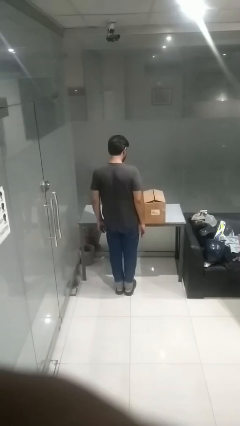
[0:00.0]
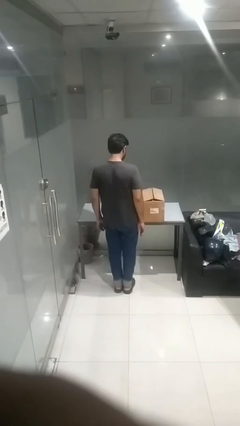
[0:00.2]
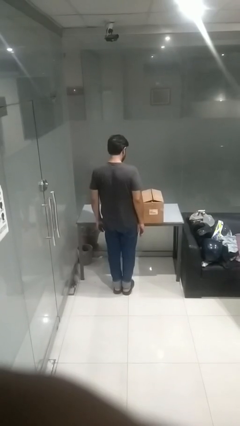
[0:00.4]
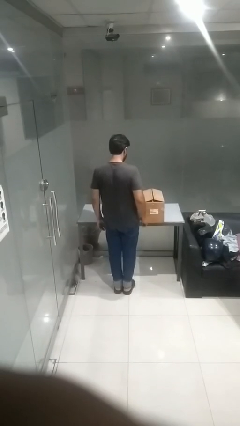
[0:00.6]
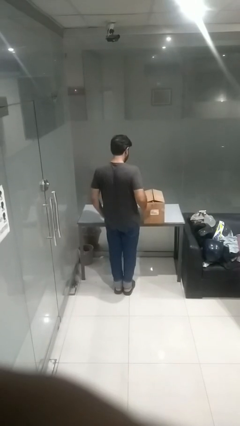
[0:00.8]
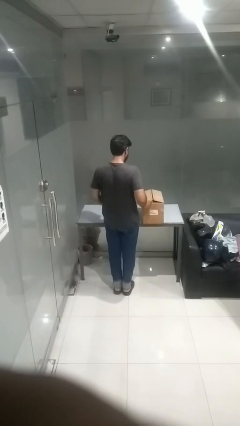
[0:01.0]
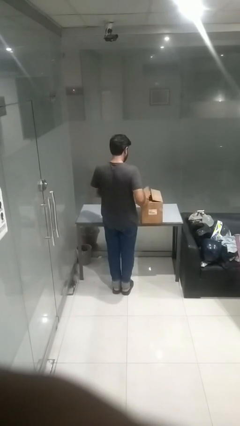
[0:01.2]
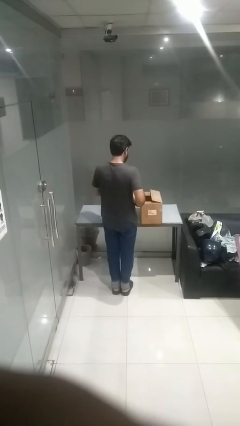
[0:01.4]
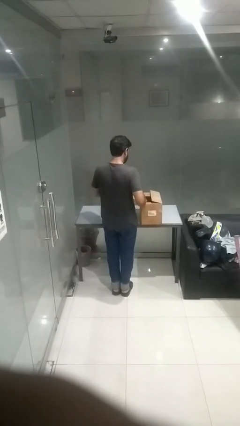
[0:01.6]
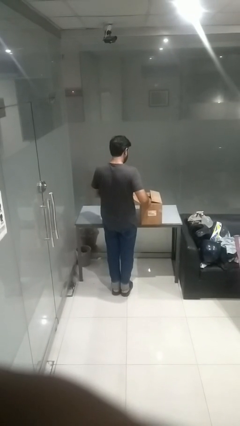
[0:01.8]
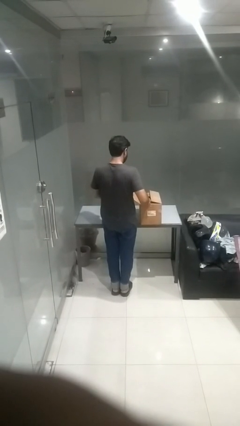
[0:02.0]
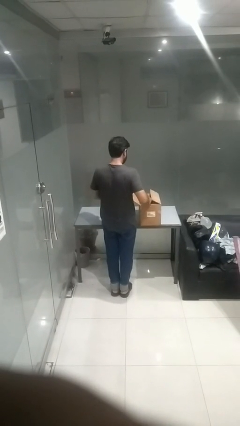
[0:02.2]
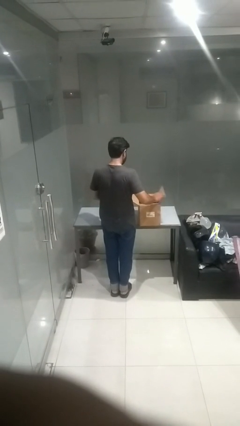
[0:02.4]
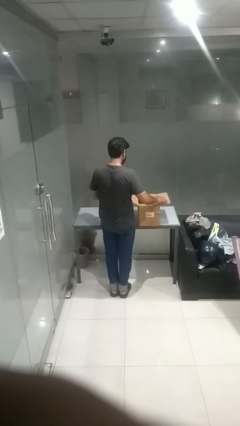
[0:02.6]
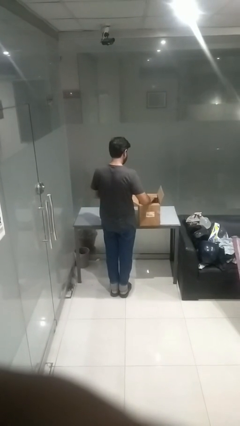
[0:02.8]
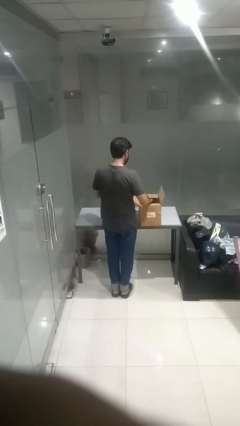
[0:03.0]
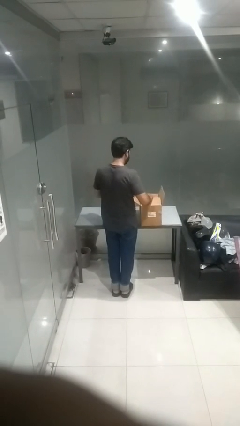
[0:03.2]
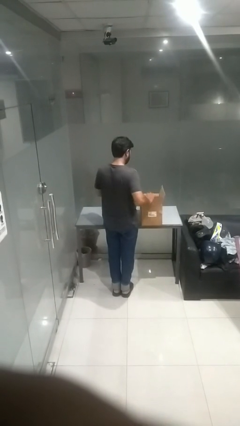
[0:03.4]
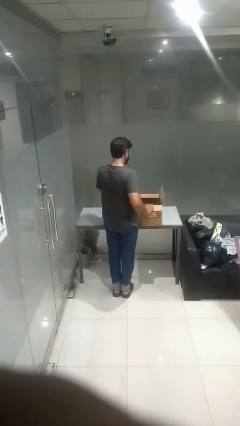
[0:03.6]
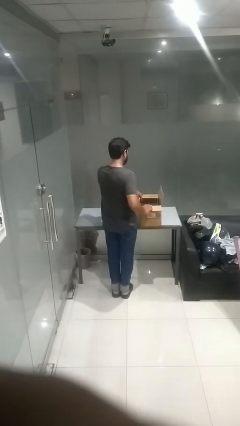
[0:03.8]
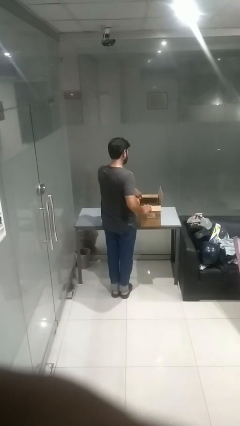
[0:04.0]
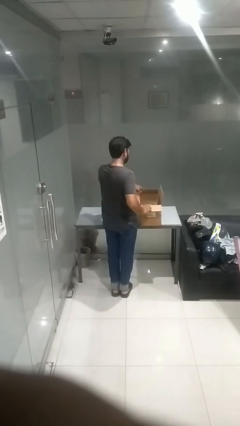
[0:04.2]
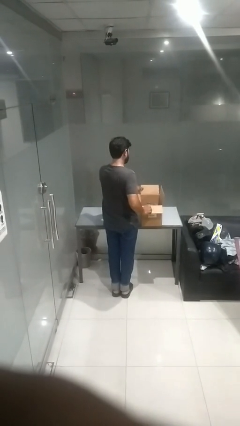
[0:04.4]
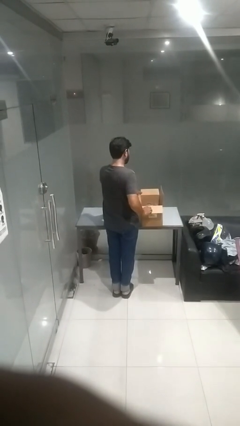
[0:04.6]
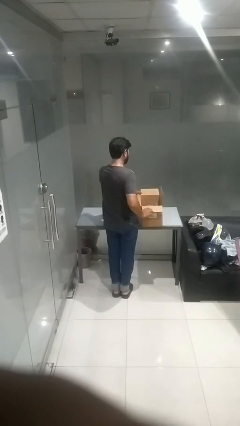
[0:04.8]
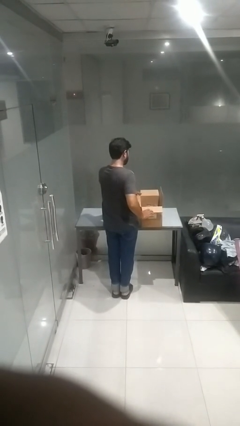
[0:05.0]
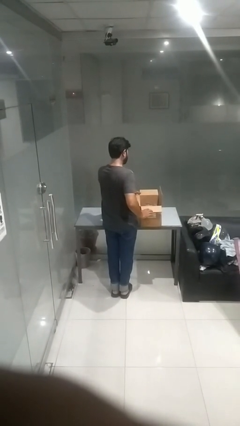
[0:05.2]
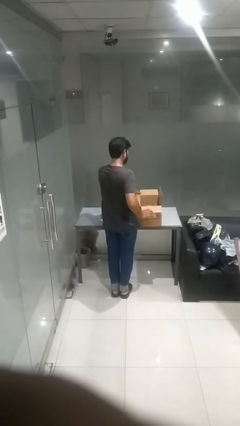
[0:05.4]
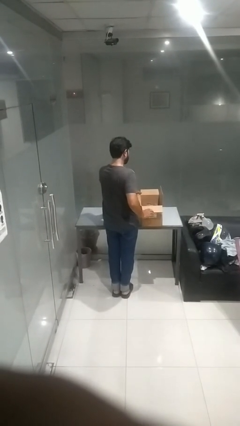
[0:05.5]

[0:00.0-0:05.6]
person opens box

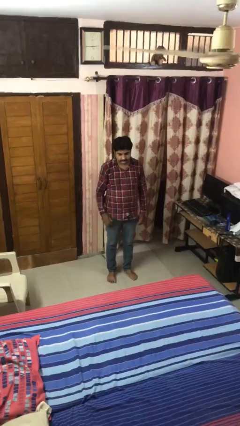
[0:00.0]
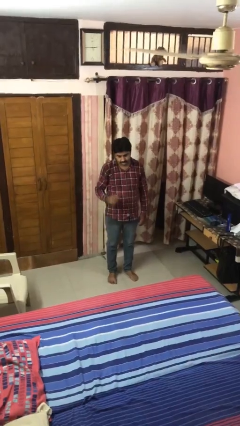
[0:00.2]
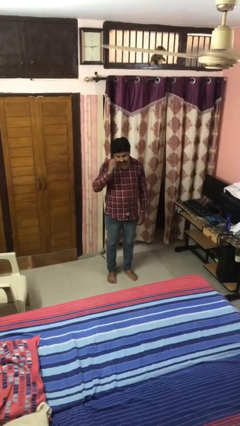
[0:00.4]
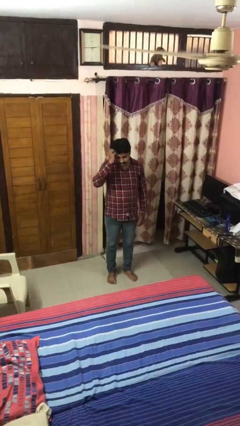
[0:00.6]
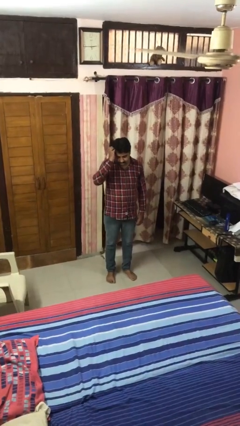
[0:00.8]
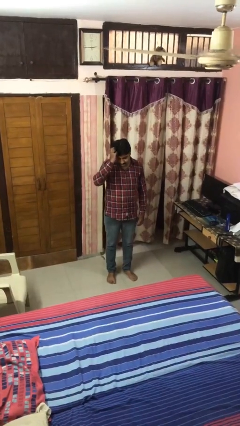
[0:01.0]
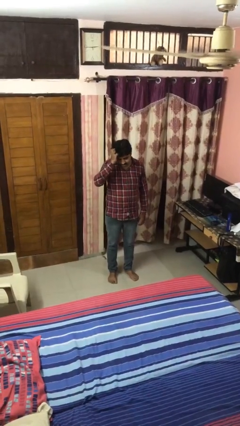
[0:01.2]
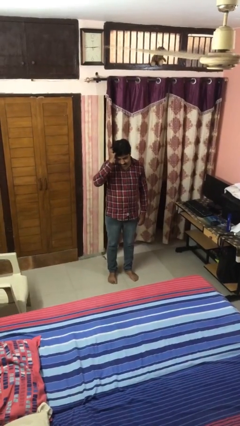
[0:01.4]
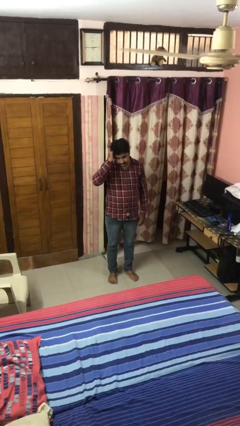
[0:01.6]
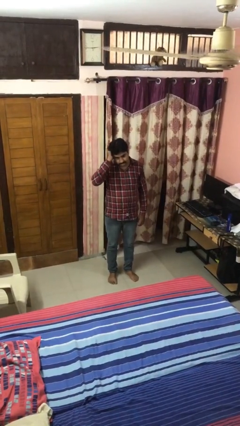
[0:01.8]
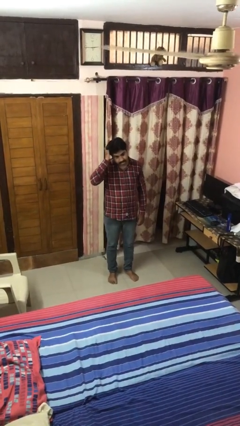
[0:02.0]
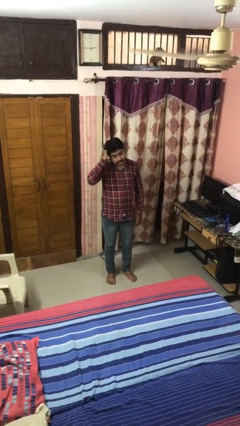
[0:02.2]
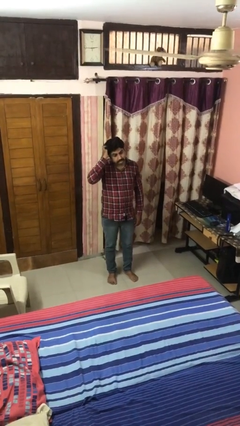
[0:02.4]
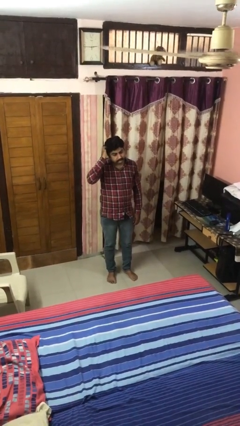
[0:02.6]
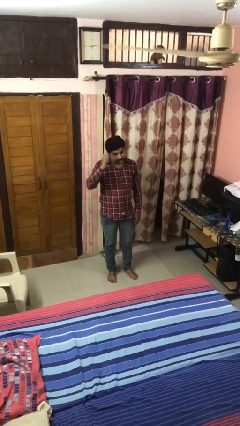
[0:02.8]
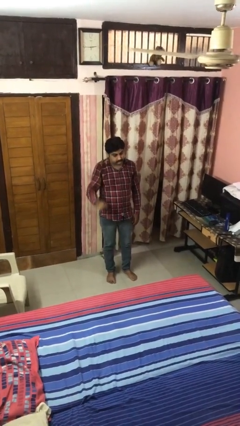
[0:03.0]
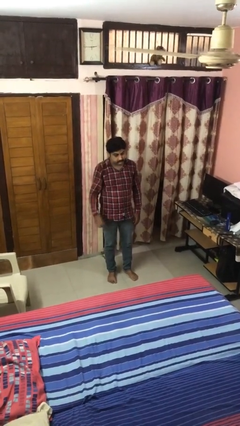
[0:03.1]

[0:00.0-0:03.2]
person scratches face

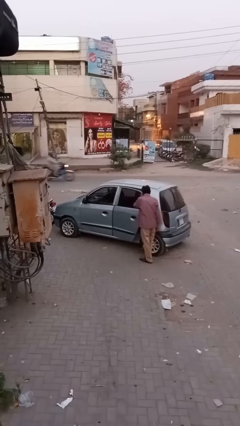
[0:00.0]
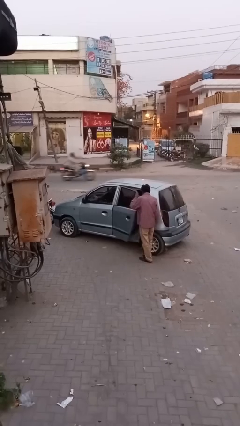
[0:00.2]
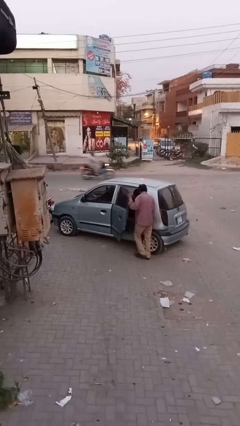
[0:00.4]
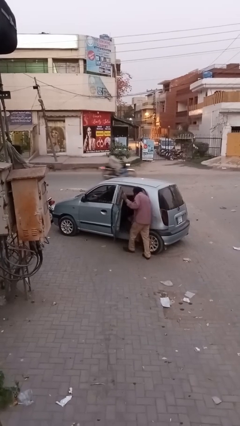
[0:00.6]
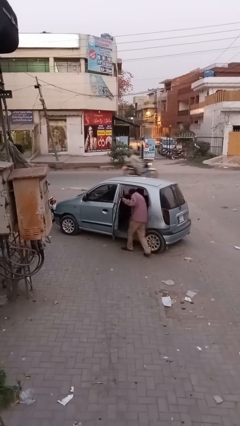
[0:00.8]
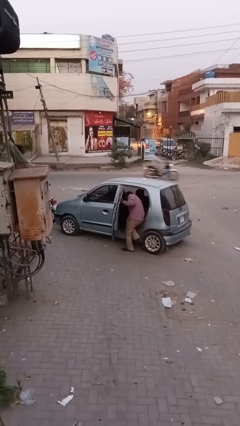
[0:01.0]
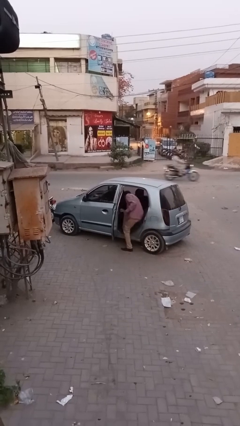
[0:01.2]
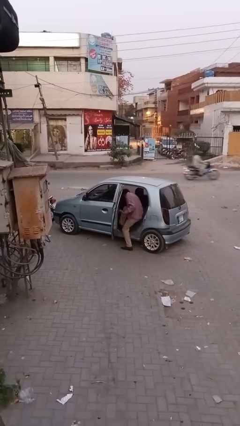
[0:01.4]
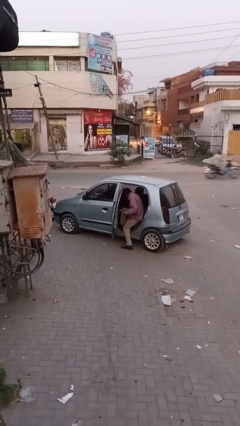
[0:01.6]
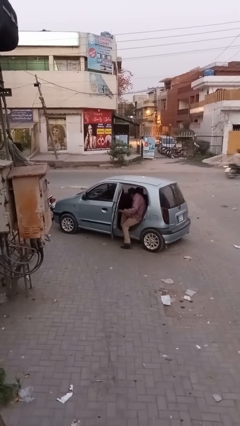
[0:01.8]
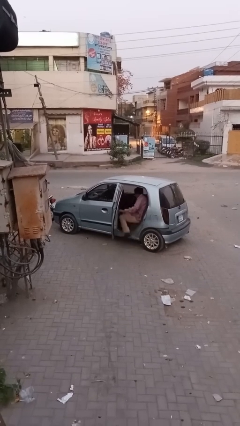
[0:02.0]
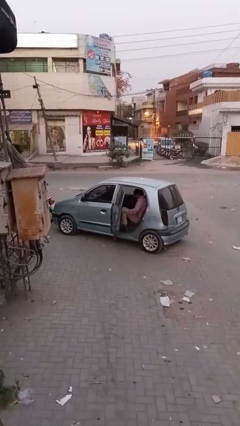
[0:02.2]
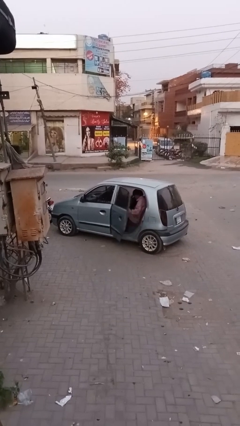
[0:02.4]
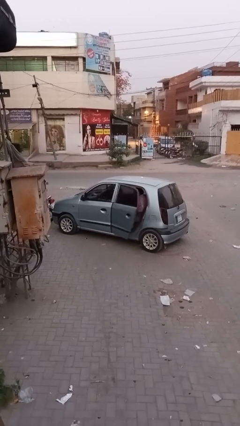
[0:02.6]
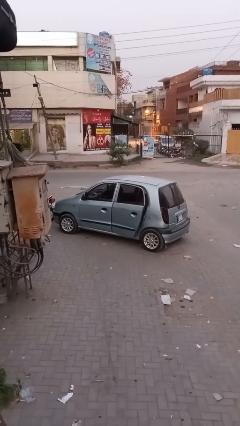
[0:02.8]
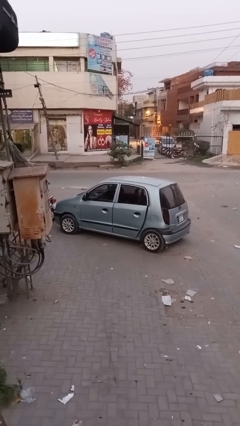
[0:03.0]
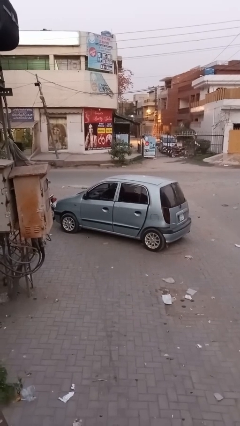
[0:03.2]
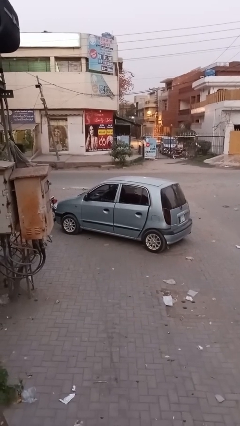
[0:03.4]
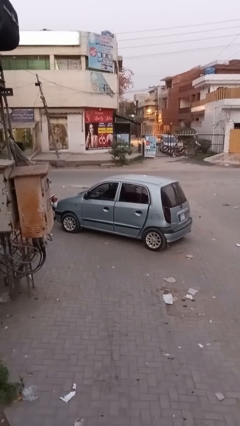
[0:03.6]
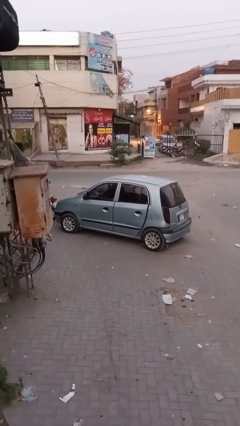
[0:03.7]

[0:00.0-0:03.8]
car picks up person

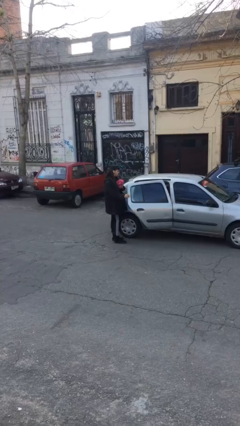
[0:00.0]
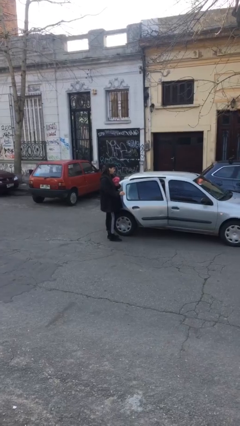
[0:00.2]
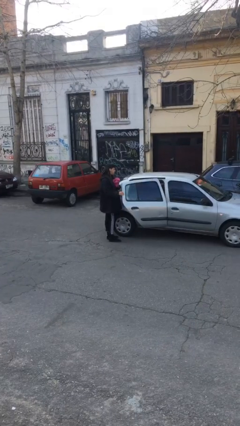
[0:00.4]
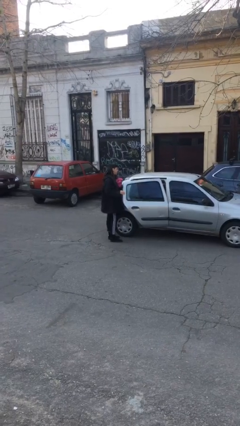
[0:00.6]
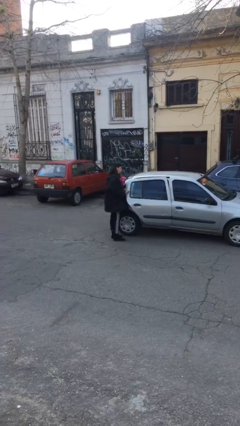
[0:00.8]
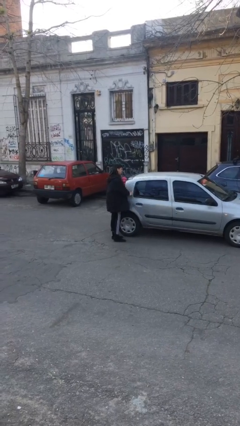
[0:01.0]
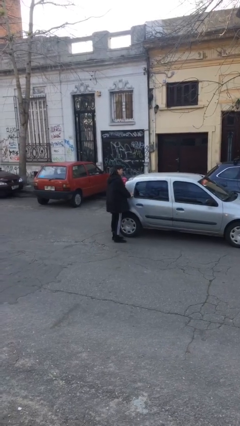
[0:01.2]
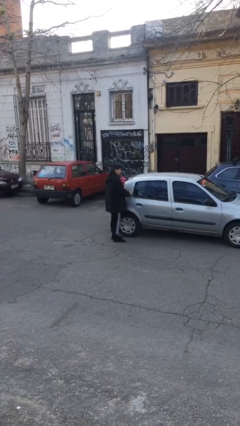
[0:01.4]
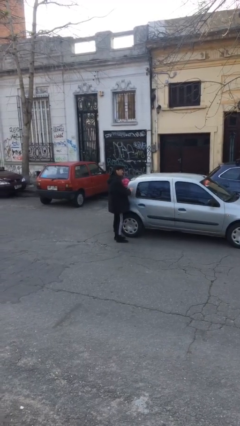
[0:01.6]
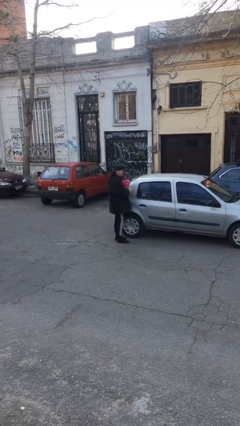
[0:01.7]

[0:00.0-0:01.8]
person closes car door

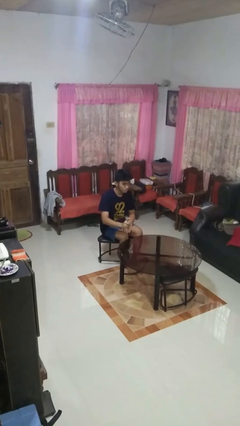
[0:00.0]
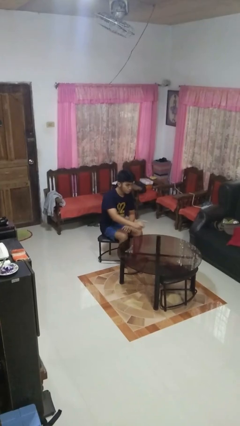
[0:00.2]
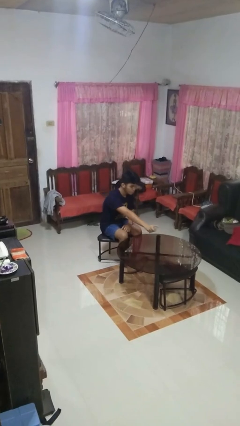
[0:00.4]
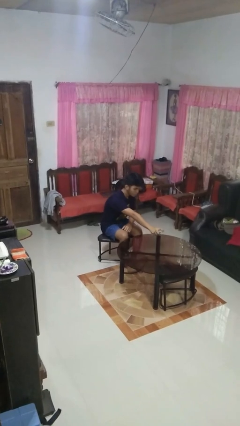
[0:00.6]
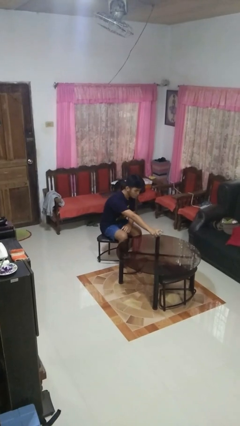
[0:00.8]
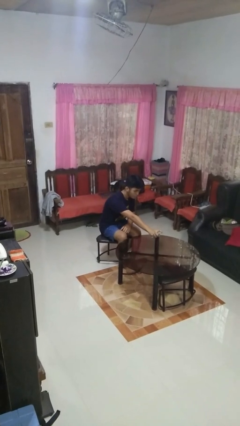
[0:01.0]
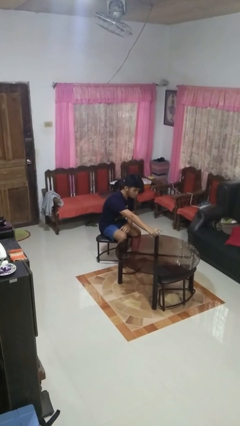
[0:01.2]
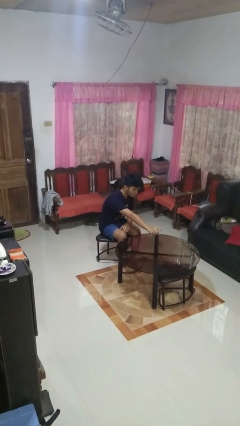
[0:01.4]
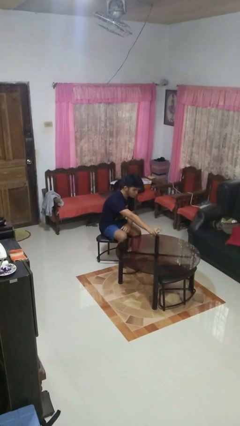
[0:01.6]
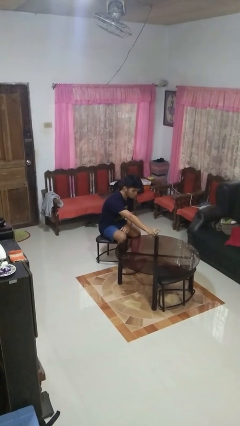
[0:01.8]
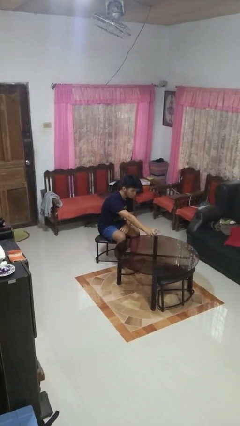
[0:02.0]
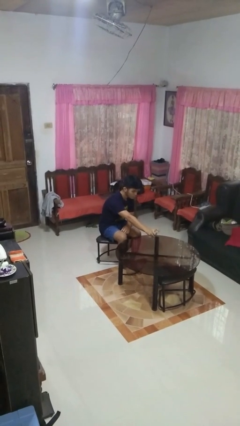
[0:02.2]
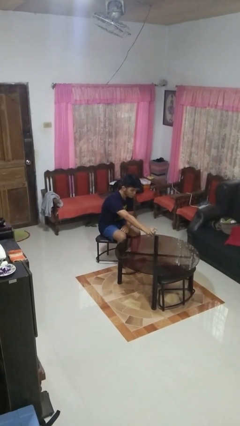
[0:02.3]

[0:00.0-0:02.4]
person sprays from bottle

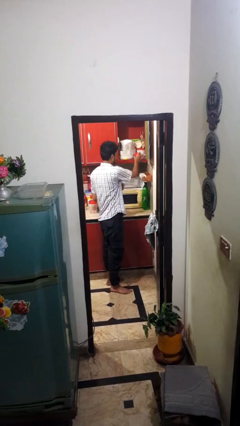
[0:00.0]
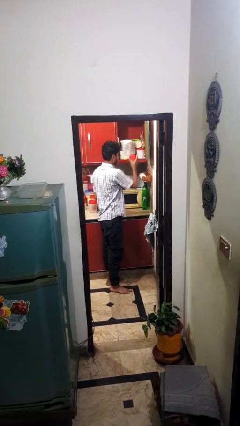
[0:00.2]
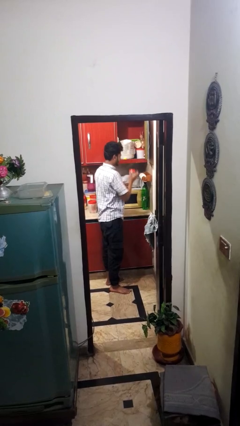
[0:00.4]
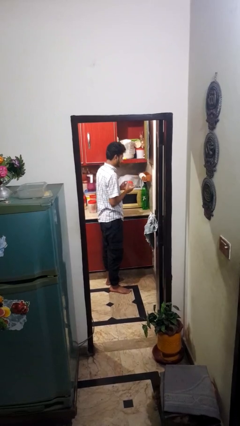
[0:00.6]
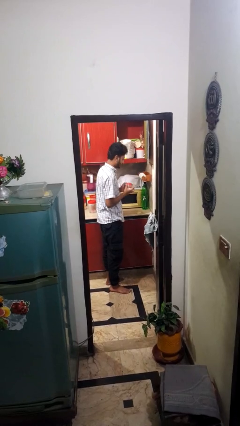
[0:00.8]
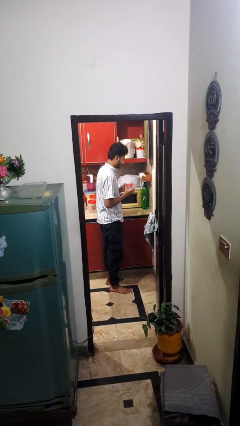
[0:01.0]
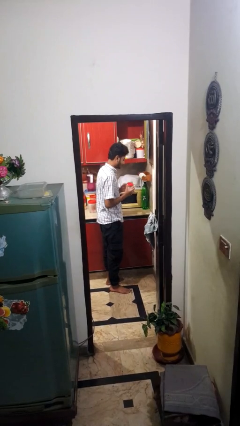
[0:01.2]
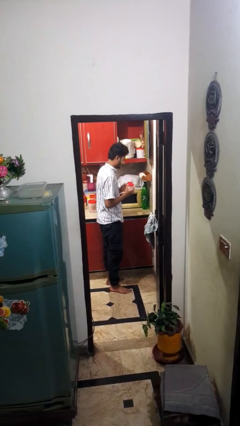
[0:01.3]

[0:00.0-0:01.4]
person picks up object from cabinet
